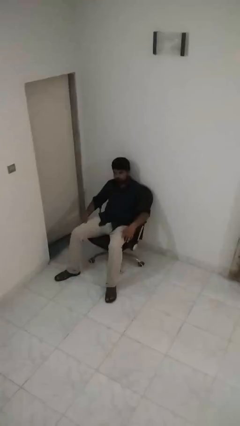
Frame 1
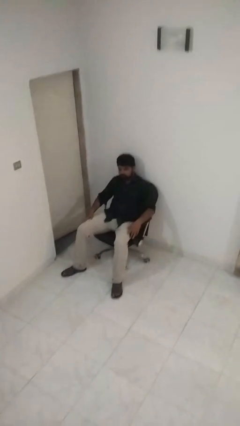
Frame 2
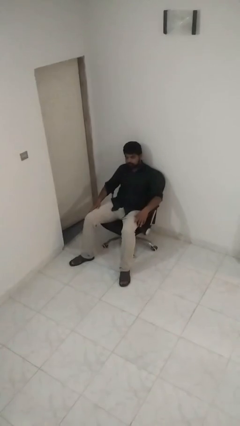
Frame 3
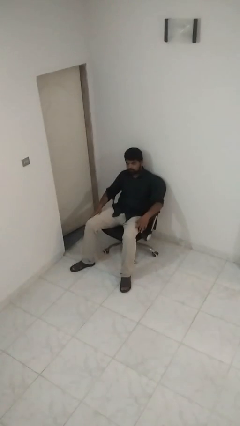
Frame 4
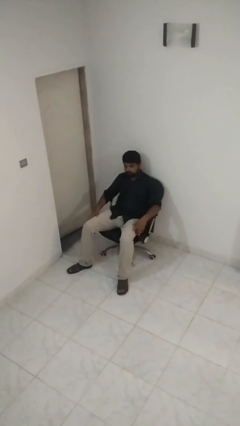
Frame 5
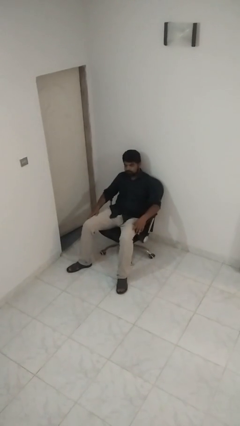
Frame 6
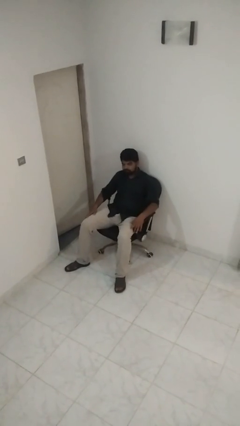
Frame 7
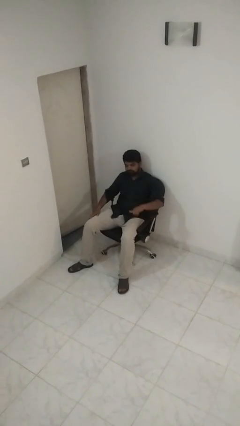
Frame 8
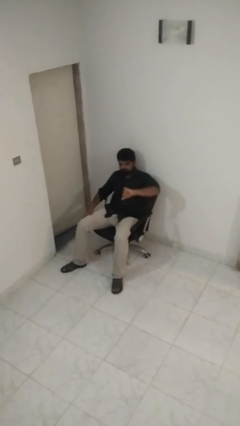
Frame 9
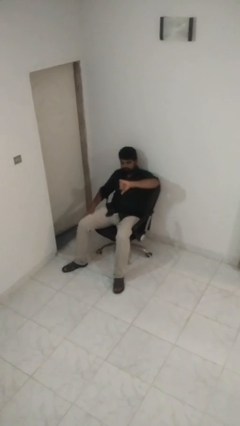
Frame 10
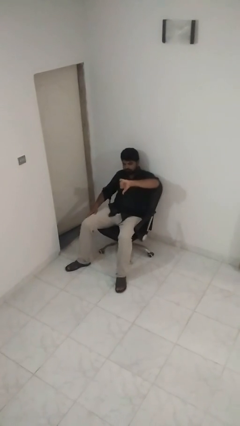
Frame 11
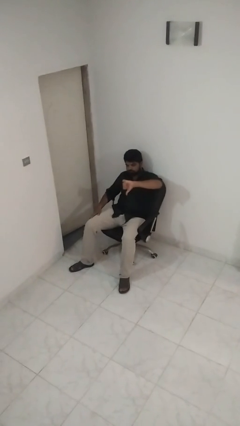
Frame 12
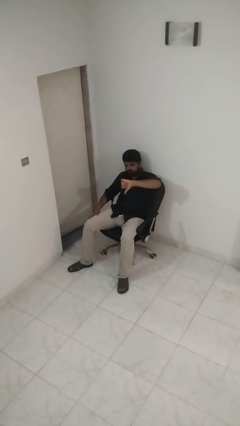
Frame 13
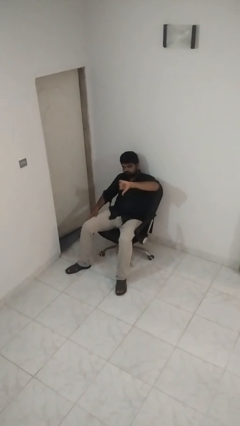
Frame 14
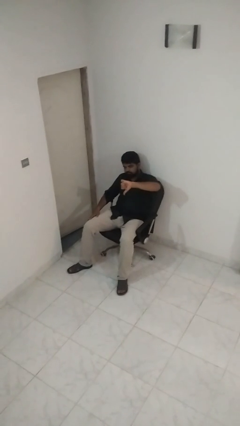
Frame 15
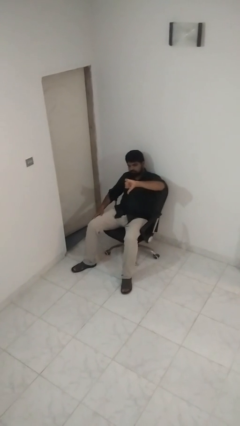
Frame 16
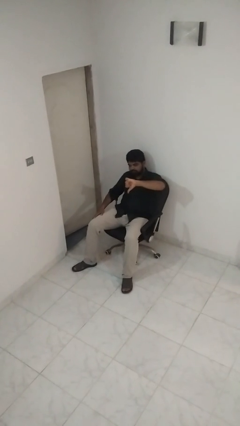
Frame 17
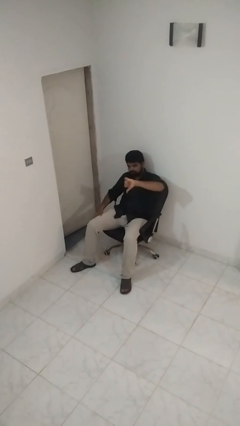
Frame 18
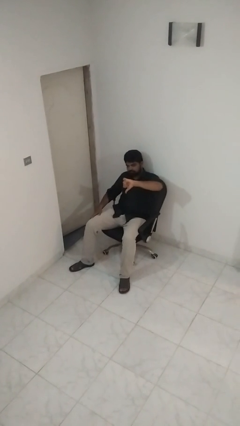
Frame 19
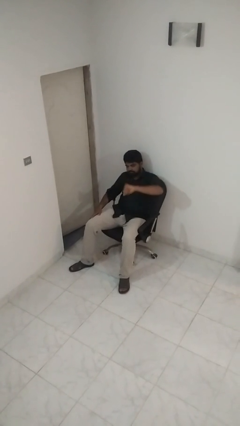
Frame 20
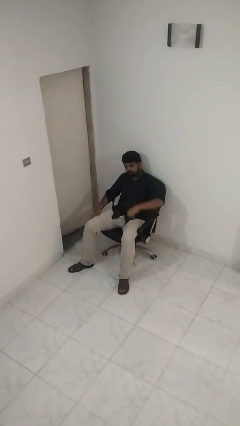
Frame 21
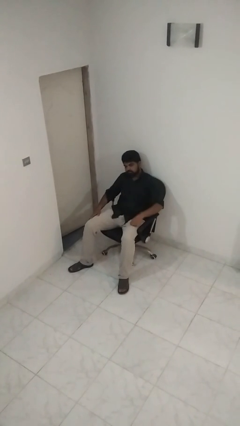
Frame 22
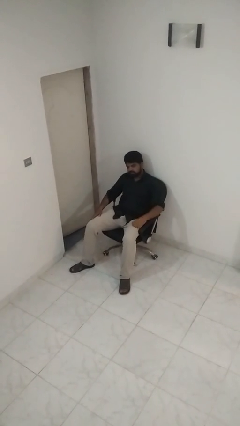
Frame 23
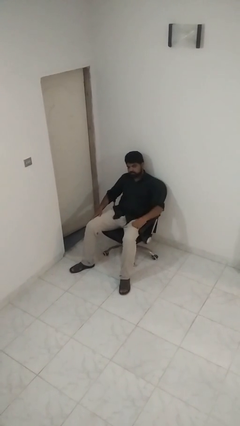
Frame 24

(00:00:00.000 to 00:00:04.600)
person gestures thumbs down

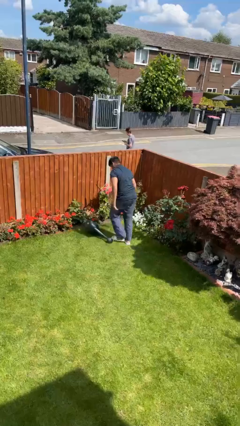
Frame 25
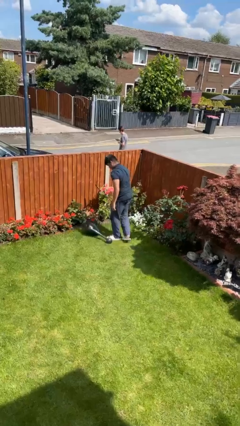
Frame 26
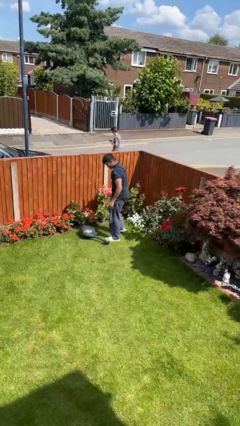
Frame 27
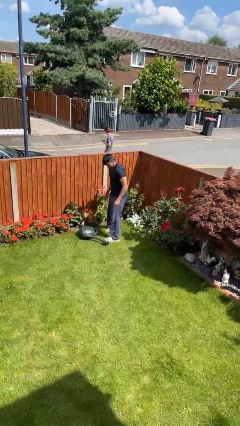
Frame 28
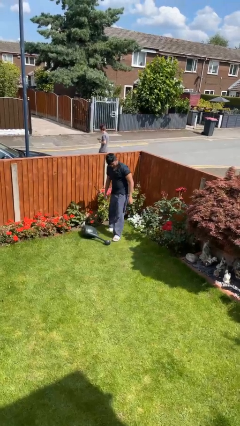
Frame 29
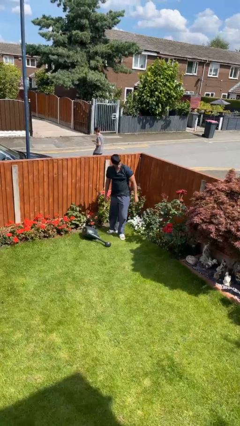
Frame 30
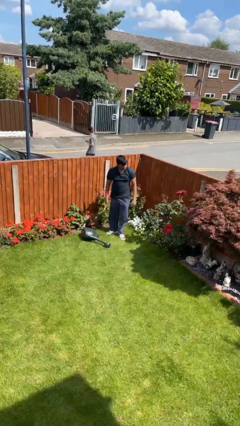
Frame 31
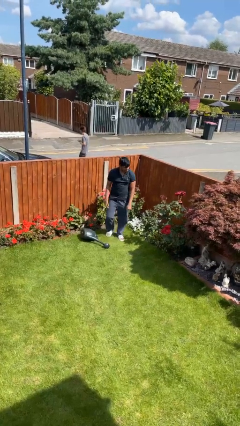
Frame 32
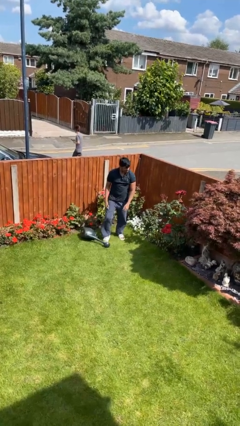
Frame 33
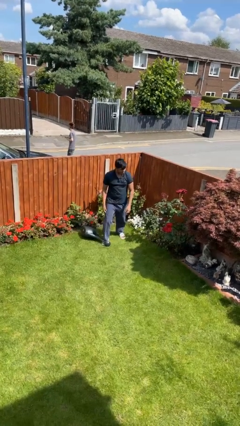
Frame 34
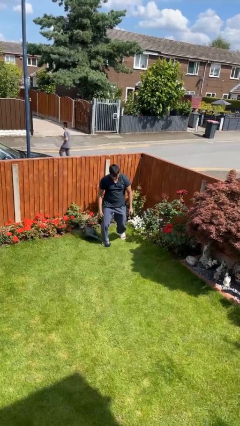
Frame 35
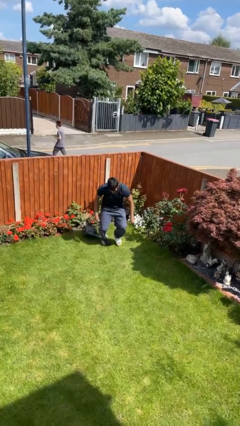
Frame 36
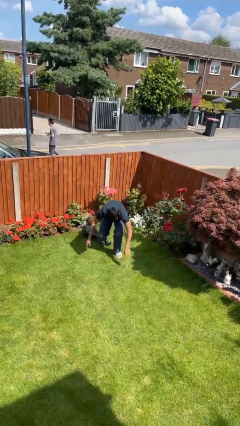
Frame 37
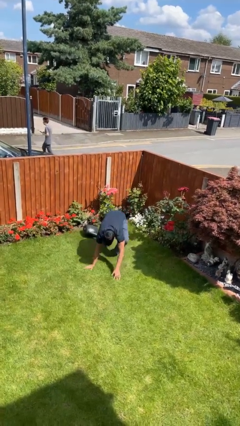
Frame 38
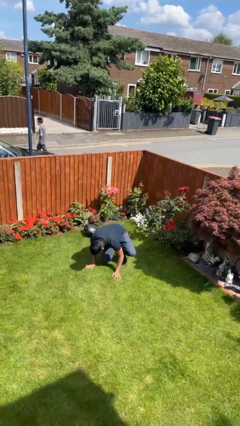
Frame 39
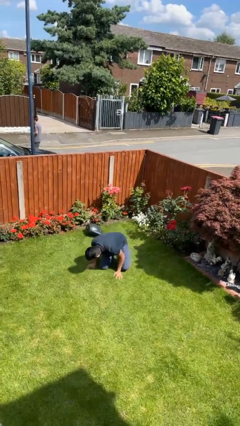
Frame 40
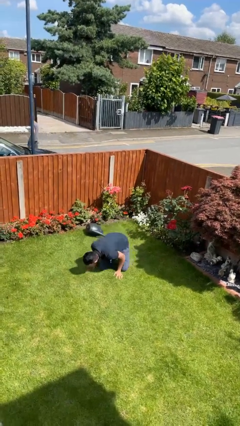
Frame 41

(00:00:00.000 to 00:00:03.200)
person trips on object on floor

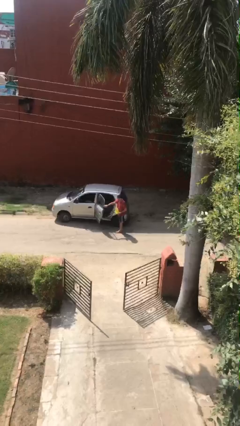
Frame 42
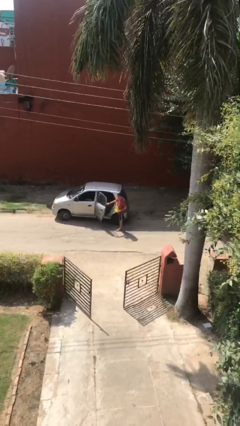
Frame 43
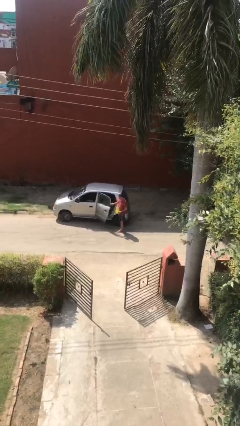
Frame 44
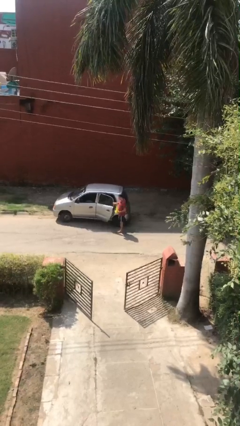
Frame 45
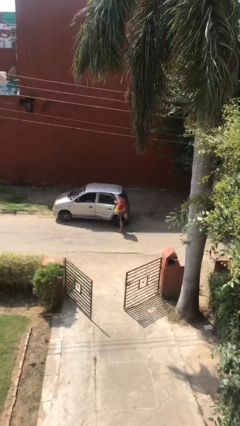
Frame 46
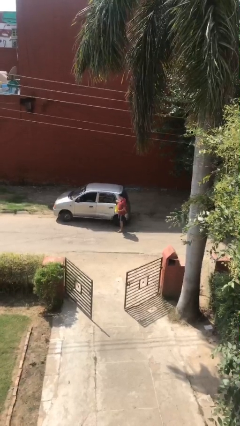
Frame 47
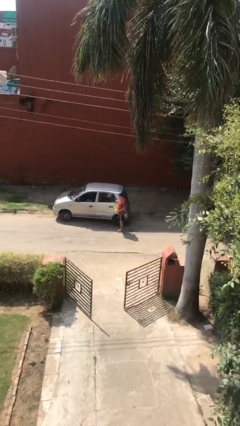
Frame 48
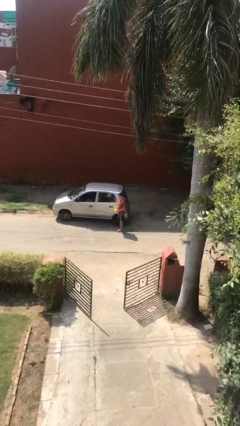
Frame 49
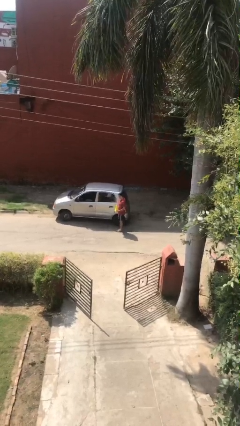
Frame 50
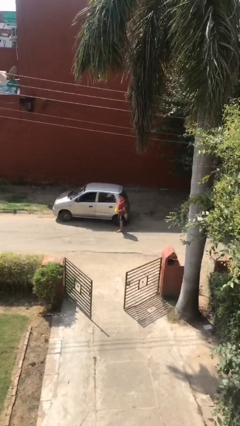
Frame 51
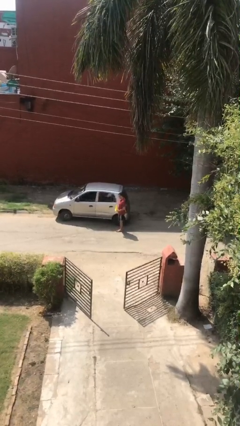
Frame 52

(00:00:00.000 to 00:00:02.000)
person closes car door

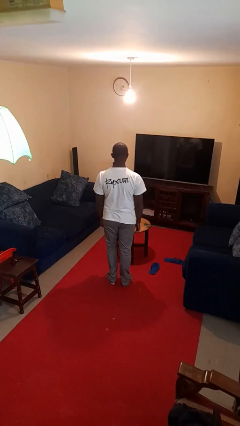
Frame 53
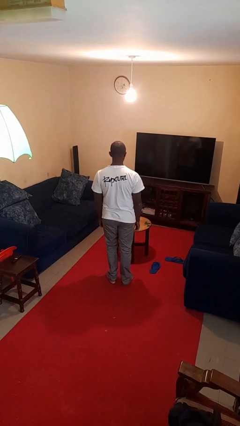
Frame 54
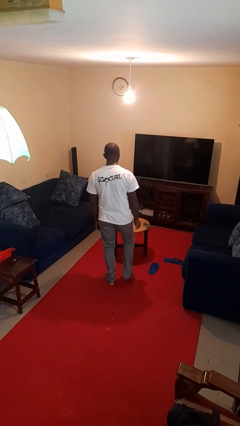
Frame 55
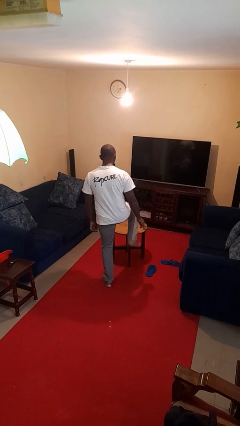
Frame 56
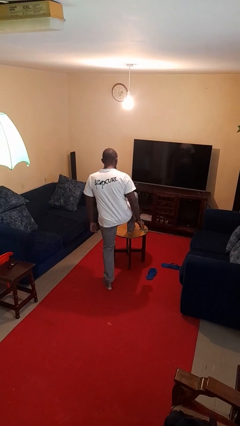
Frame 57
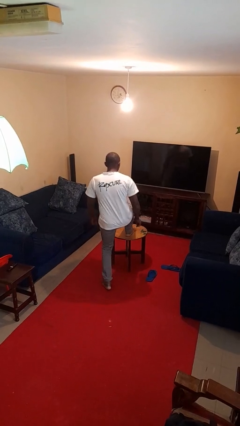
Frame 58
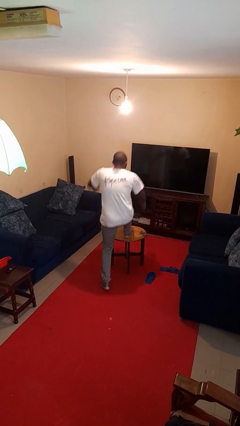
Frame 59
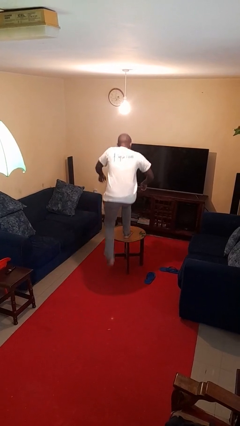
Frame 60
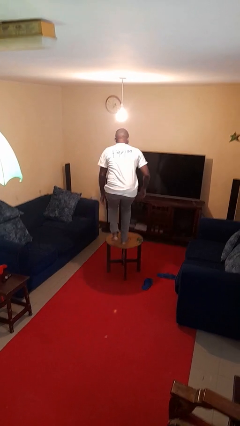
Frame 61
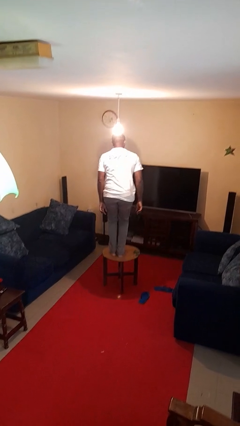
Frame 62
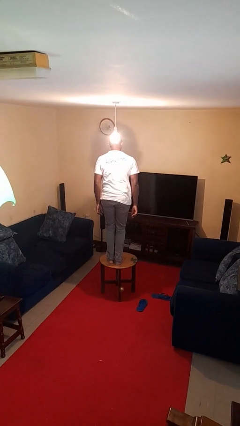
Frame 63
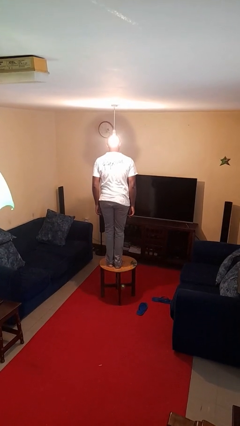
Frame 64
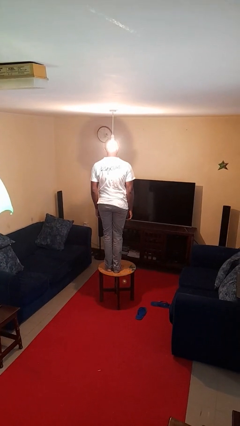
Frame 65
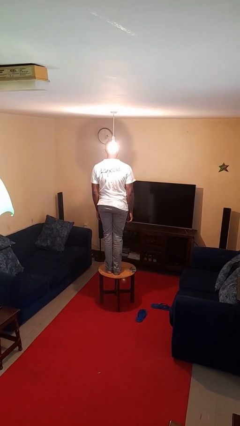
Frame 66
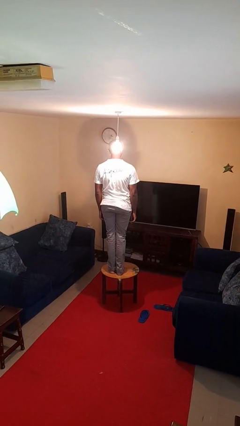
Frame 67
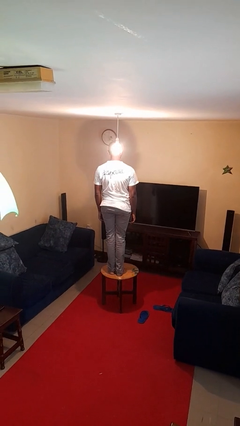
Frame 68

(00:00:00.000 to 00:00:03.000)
person climbs on table

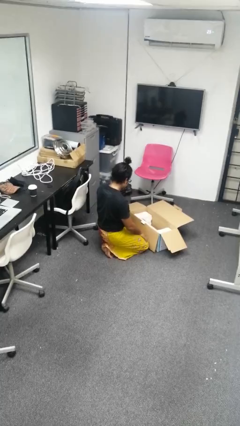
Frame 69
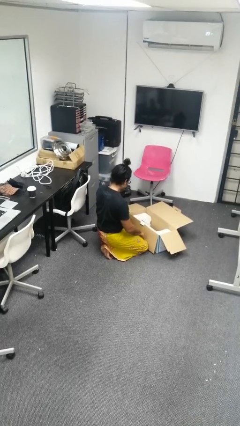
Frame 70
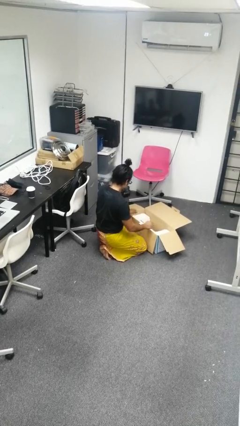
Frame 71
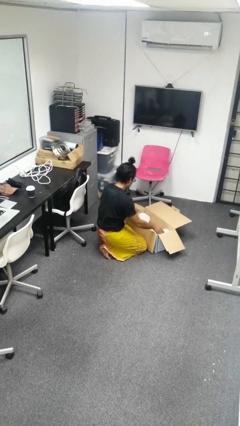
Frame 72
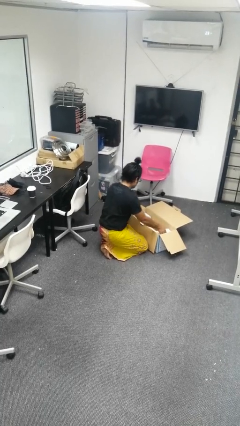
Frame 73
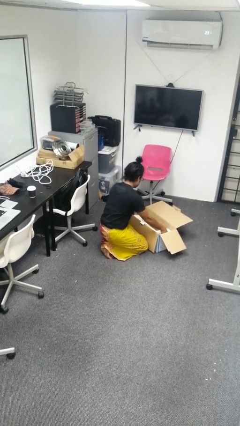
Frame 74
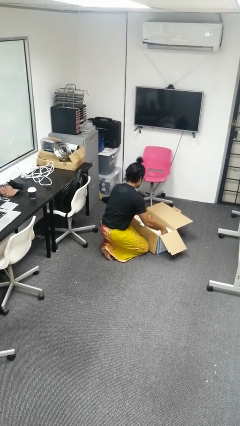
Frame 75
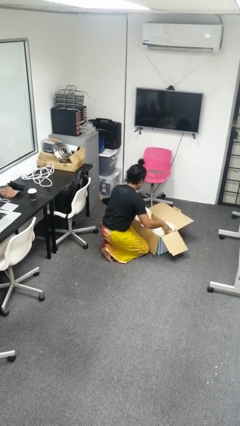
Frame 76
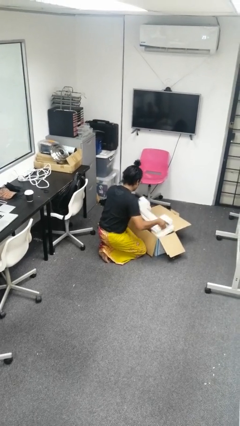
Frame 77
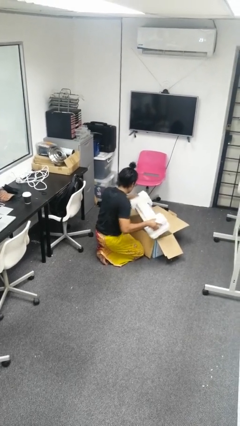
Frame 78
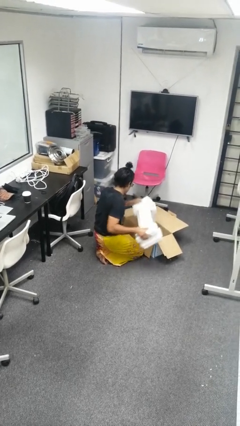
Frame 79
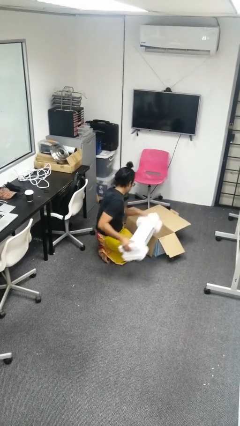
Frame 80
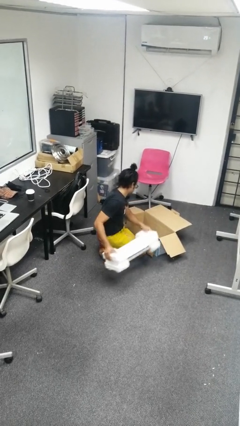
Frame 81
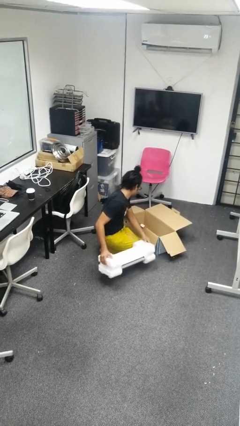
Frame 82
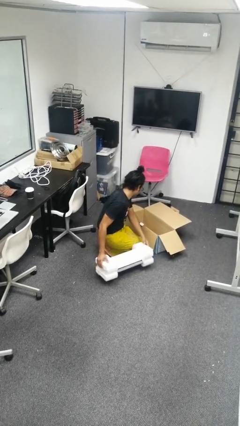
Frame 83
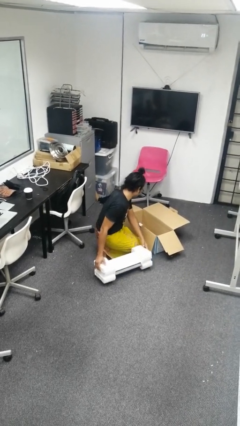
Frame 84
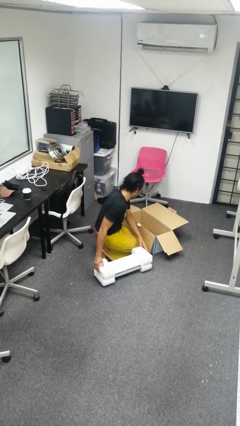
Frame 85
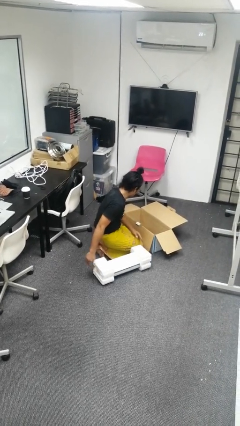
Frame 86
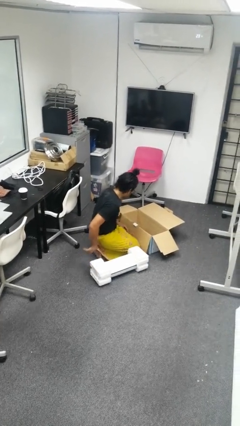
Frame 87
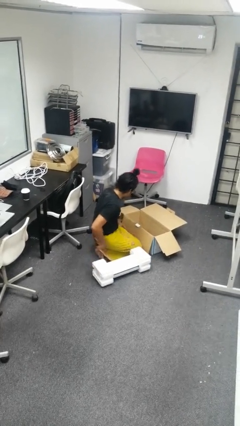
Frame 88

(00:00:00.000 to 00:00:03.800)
person takes object from box

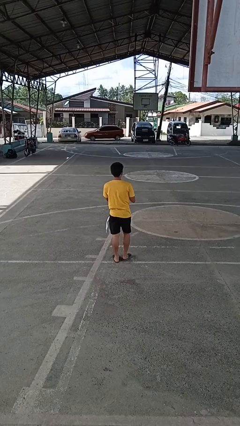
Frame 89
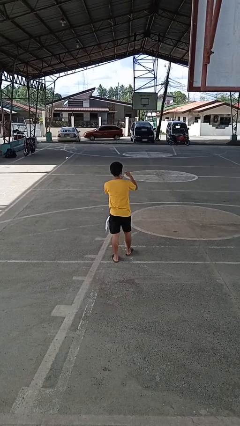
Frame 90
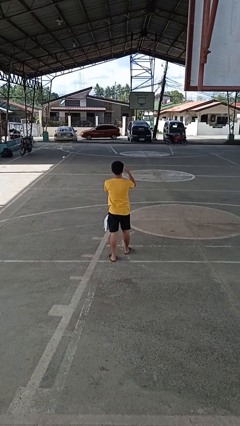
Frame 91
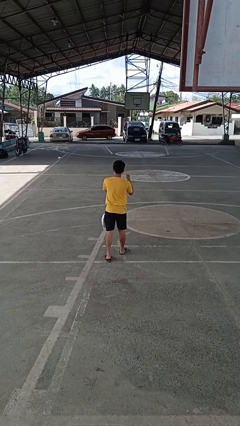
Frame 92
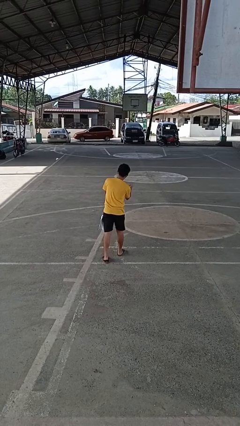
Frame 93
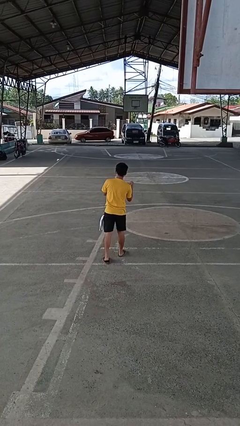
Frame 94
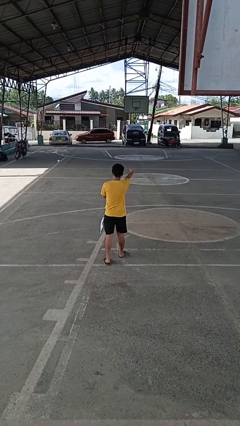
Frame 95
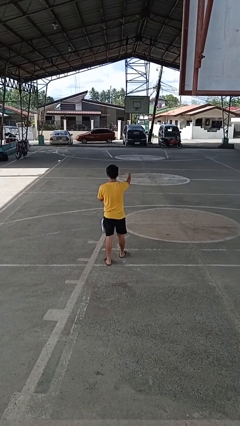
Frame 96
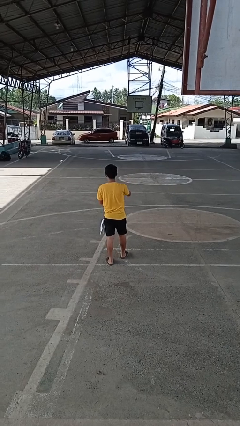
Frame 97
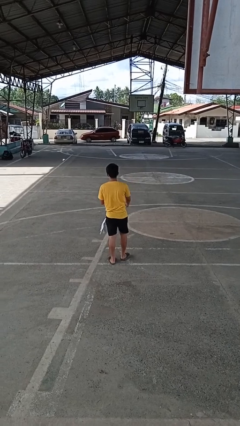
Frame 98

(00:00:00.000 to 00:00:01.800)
person punches
